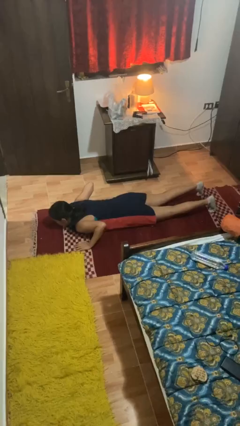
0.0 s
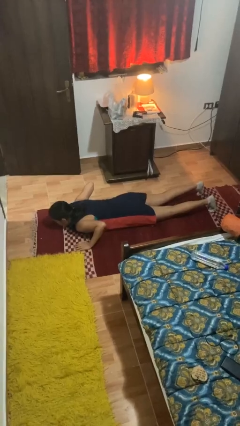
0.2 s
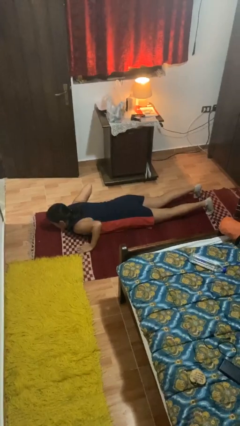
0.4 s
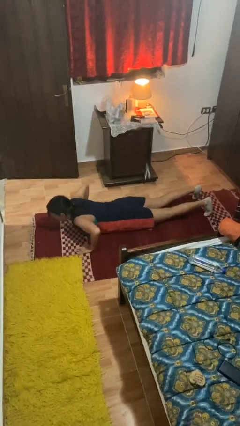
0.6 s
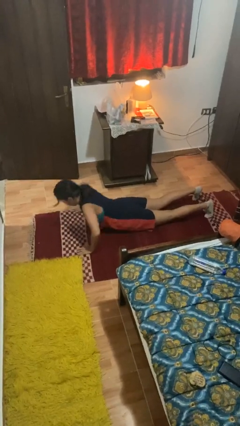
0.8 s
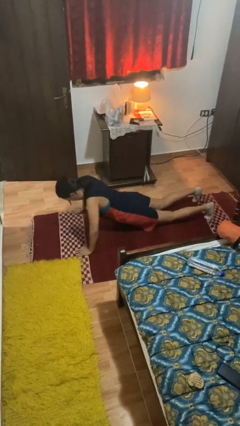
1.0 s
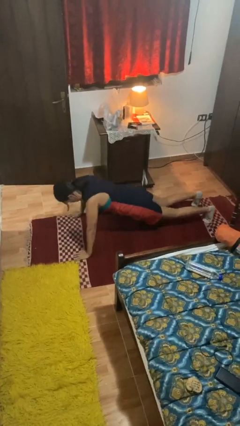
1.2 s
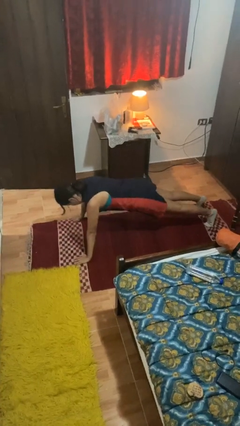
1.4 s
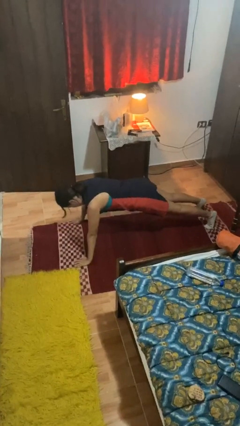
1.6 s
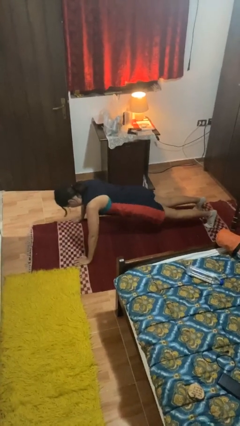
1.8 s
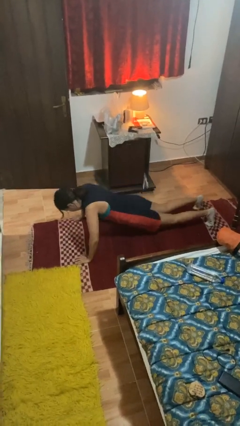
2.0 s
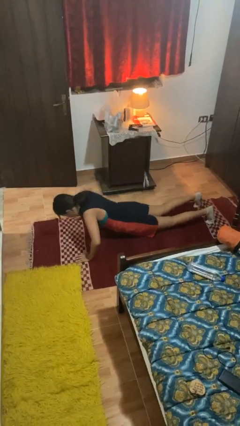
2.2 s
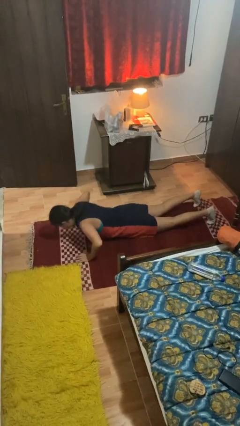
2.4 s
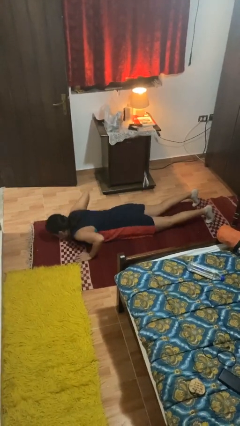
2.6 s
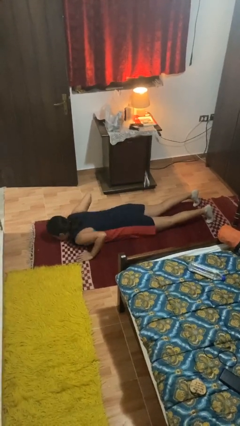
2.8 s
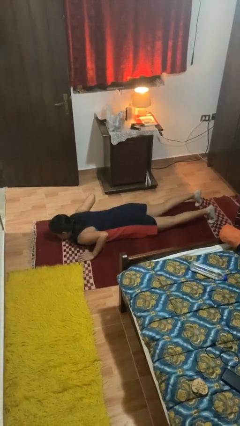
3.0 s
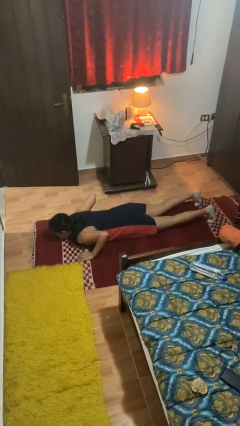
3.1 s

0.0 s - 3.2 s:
person exercises with pushup

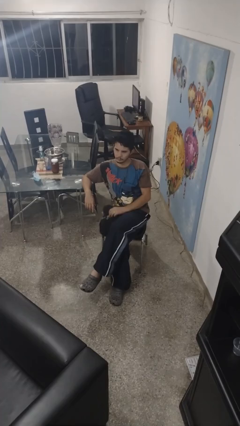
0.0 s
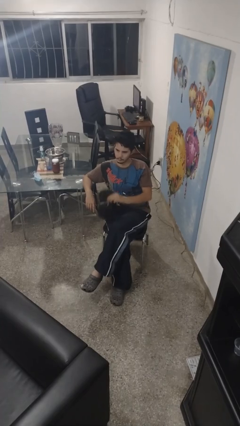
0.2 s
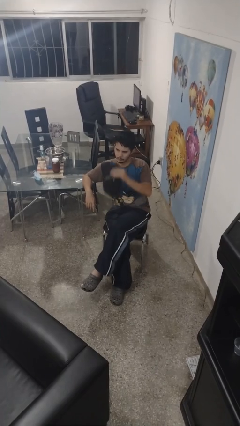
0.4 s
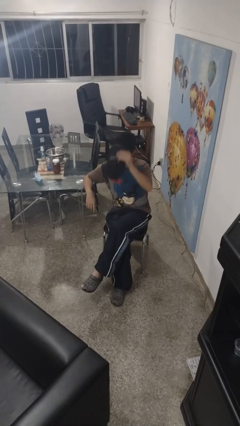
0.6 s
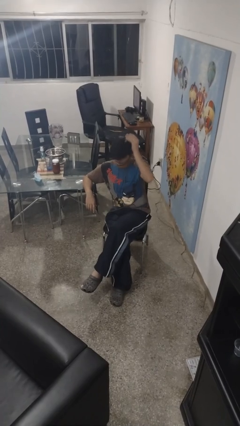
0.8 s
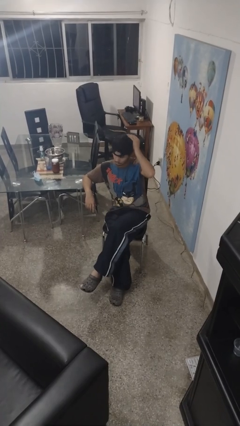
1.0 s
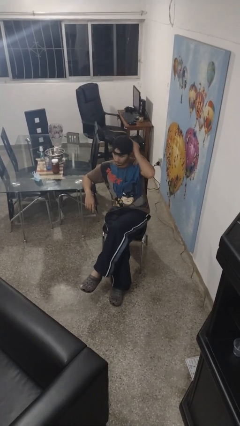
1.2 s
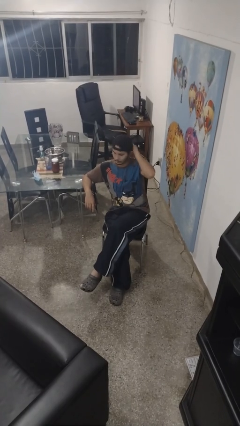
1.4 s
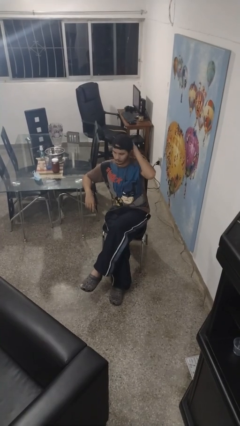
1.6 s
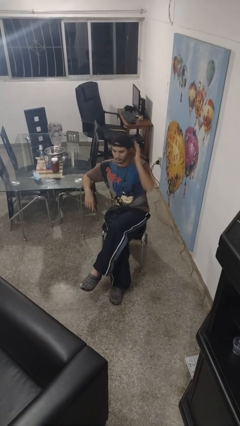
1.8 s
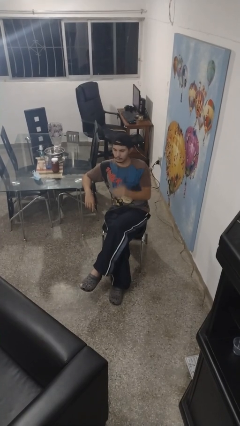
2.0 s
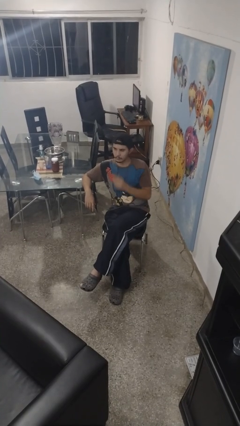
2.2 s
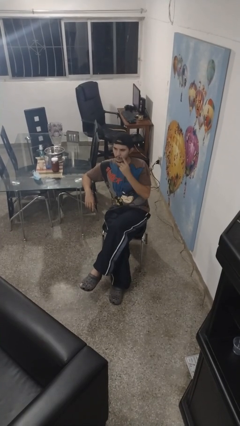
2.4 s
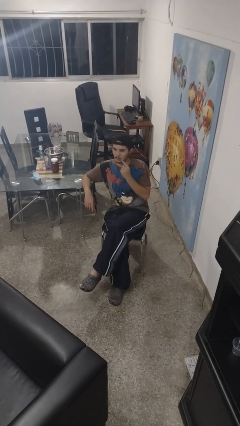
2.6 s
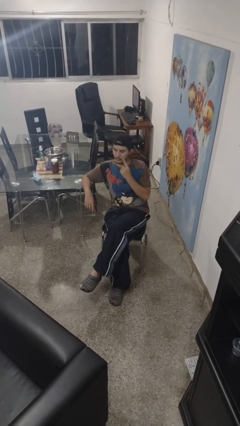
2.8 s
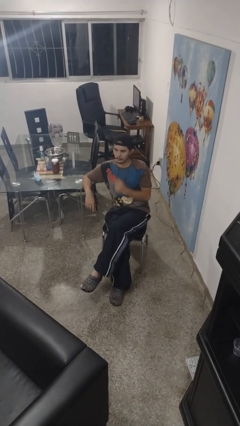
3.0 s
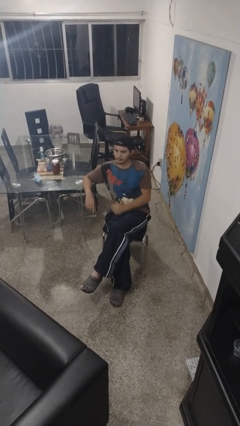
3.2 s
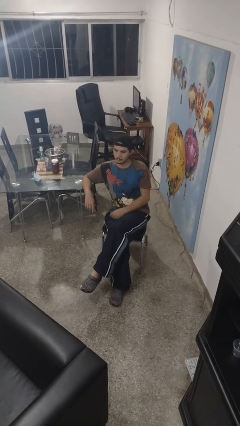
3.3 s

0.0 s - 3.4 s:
person puts on hat

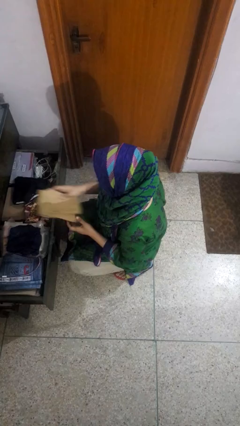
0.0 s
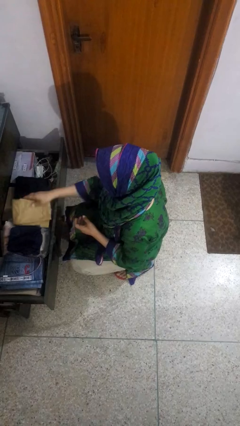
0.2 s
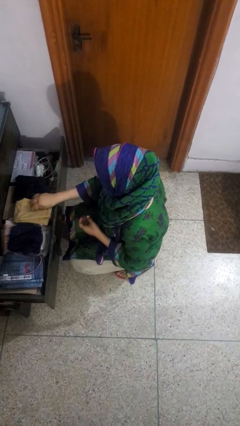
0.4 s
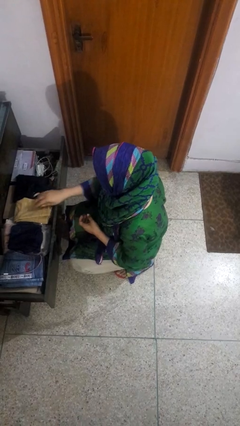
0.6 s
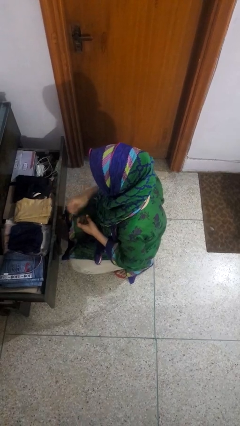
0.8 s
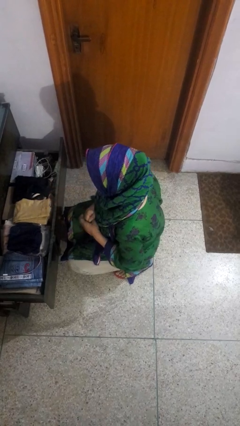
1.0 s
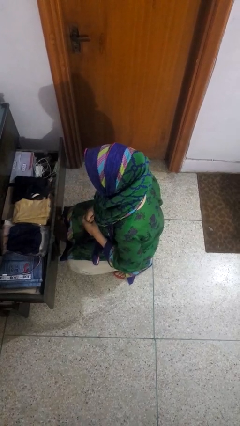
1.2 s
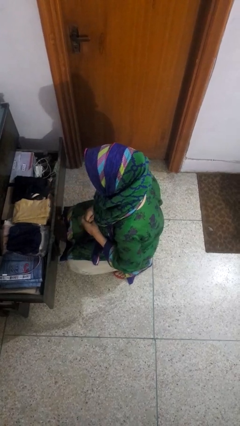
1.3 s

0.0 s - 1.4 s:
person puts clothes into dresser

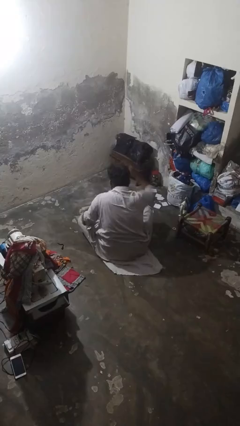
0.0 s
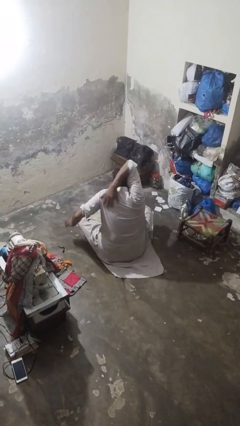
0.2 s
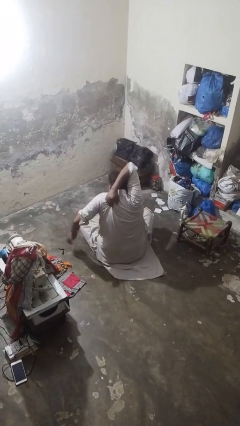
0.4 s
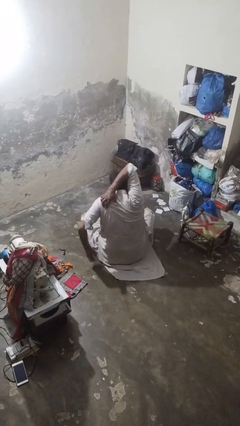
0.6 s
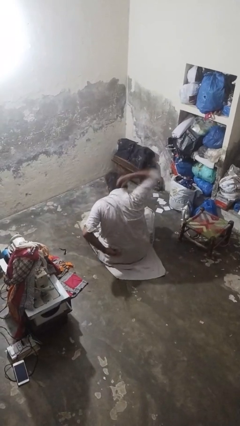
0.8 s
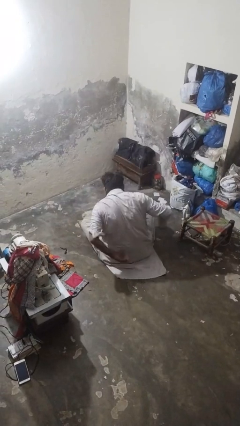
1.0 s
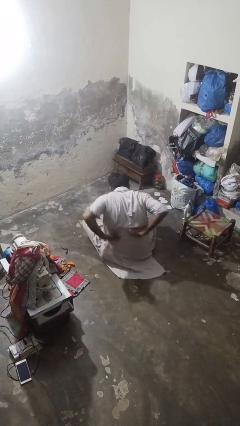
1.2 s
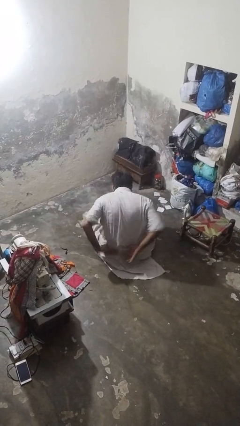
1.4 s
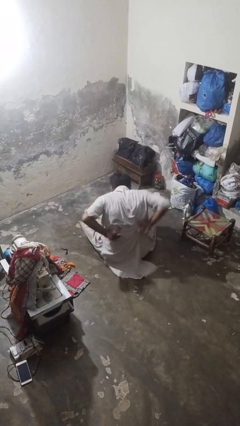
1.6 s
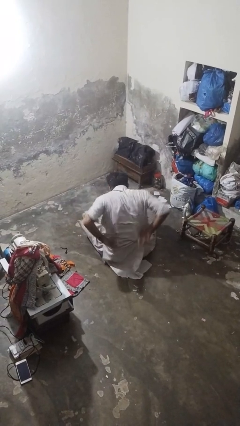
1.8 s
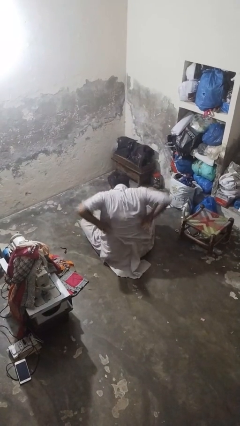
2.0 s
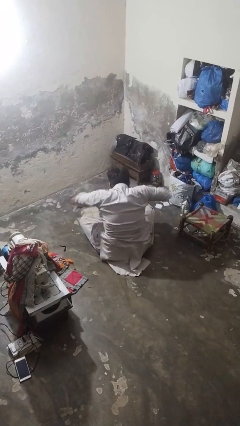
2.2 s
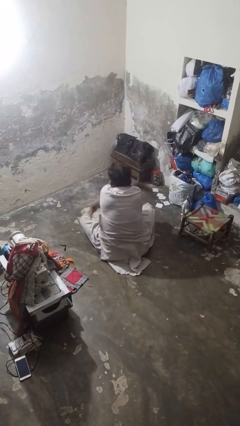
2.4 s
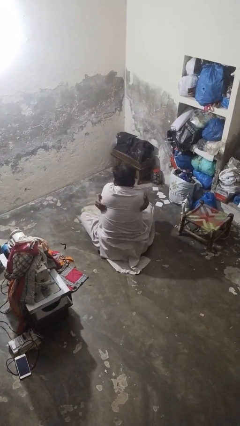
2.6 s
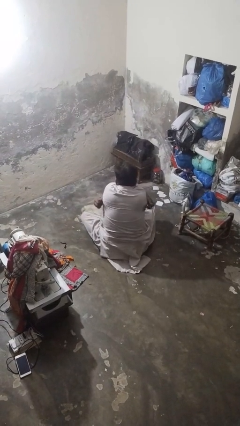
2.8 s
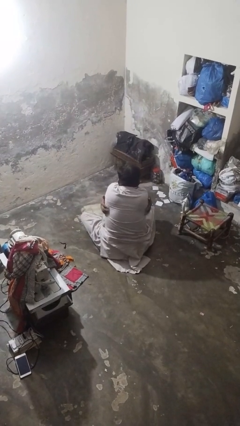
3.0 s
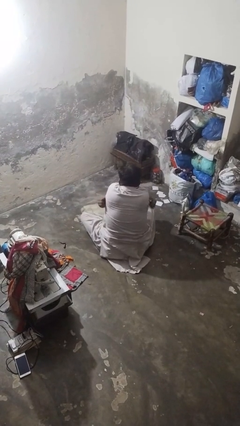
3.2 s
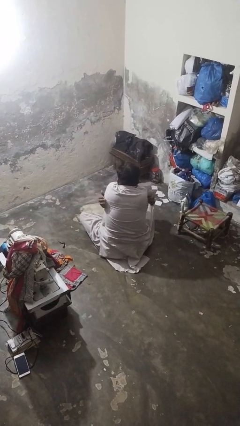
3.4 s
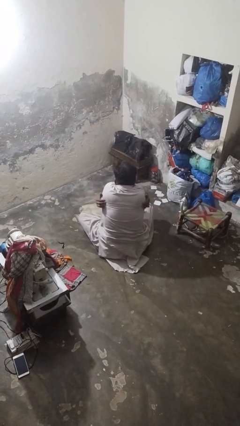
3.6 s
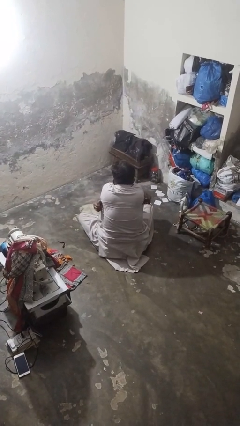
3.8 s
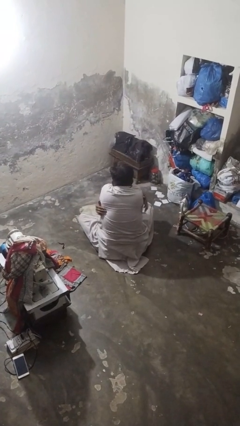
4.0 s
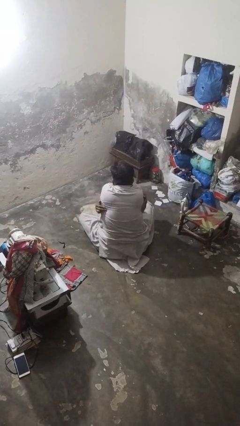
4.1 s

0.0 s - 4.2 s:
person swats bug

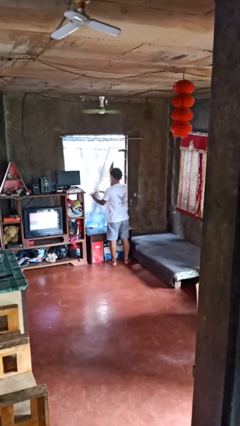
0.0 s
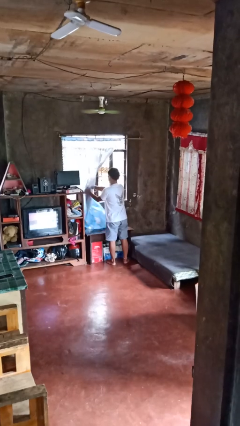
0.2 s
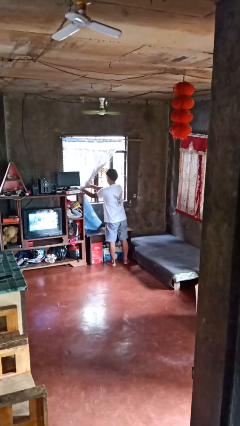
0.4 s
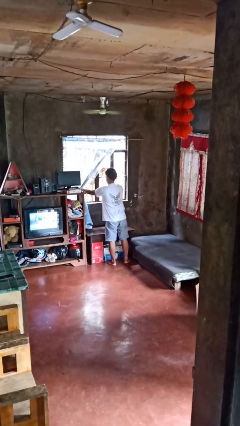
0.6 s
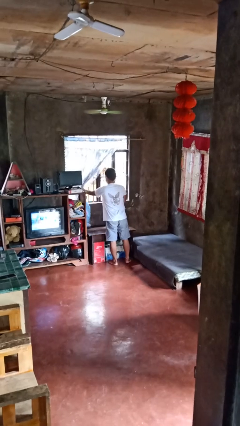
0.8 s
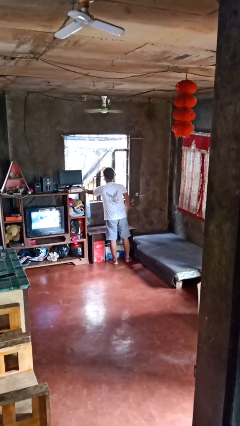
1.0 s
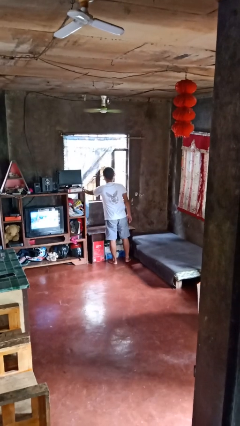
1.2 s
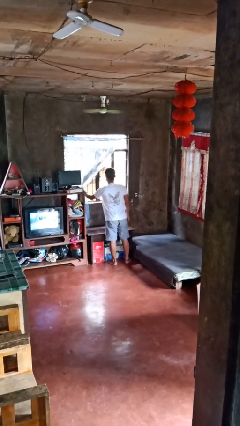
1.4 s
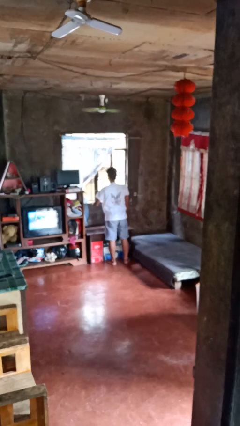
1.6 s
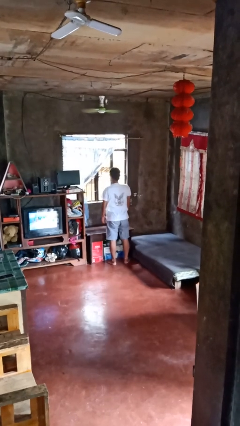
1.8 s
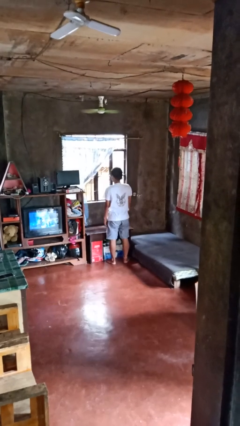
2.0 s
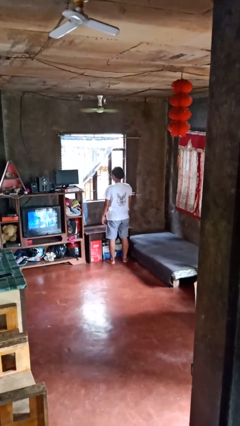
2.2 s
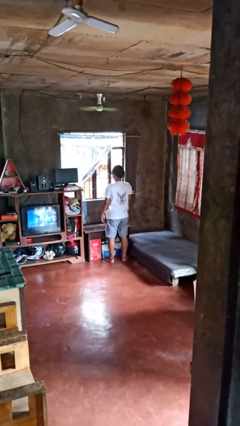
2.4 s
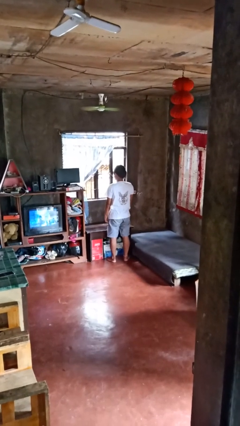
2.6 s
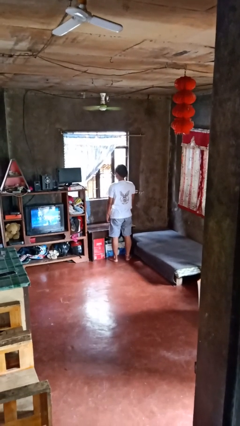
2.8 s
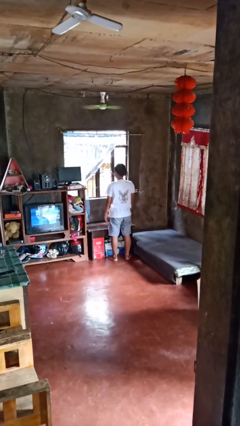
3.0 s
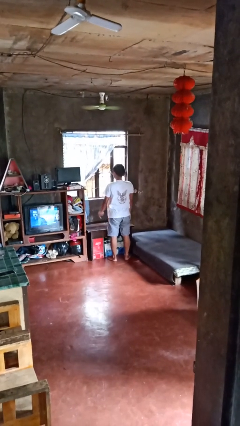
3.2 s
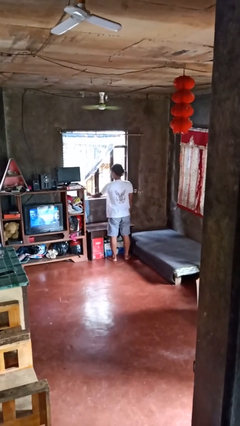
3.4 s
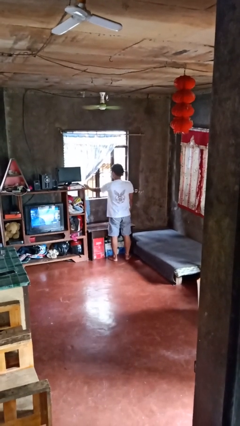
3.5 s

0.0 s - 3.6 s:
person opens curtains

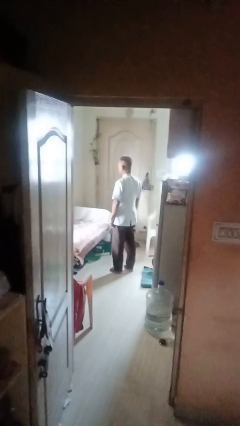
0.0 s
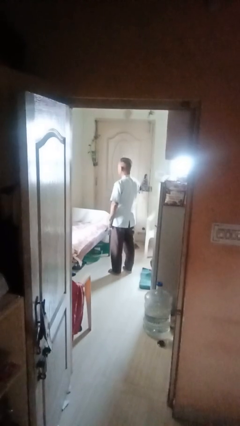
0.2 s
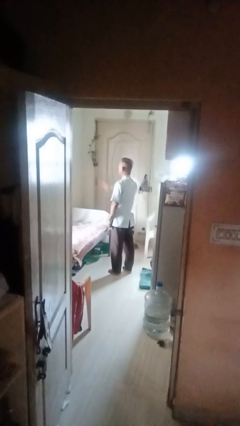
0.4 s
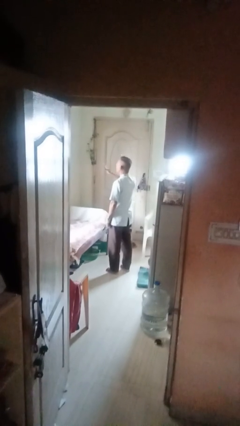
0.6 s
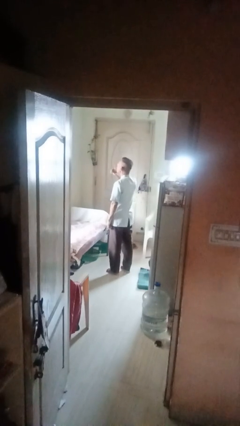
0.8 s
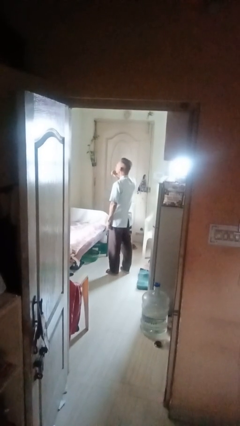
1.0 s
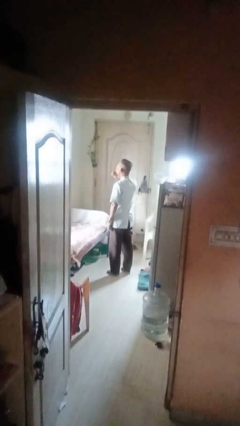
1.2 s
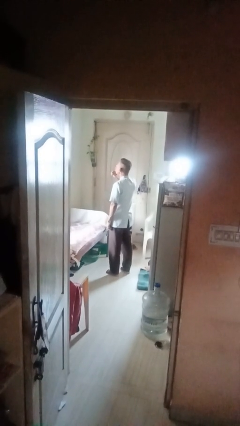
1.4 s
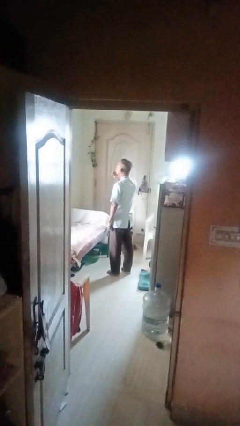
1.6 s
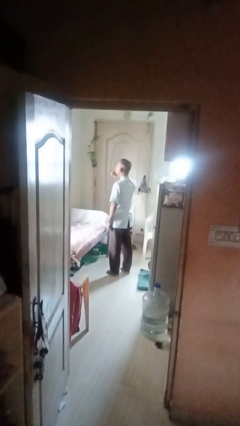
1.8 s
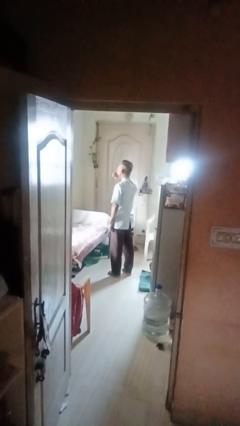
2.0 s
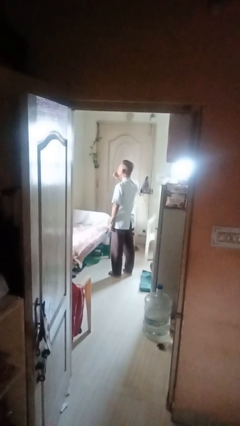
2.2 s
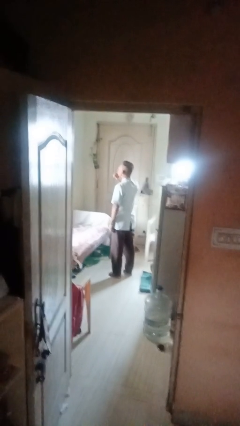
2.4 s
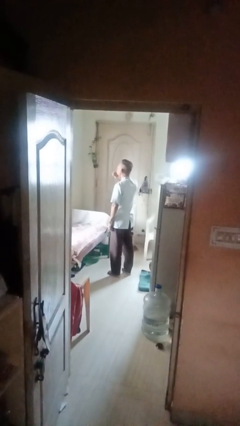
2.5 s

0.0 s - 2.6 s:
person gestures be quiet
